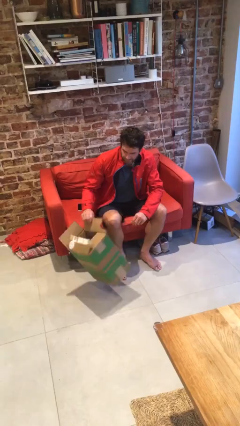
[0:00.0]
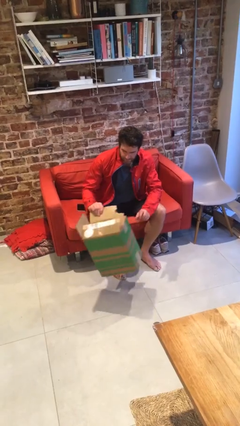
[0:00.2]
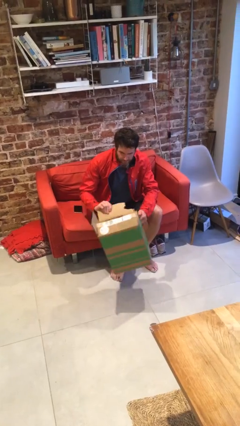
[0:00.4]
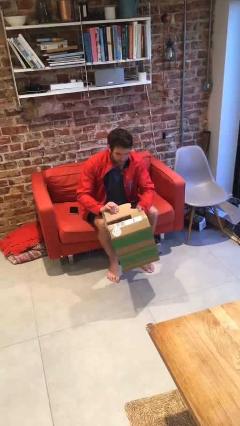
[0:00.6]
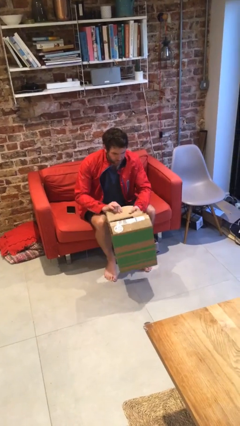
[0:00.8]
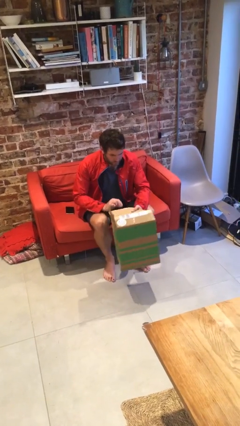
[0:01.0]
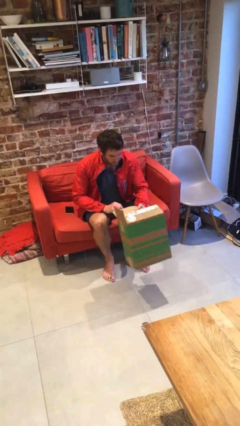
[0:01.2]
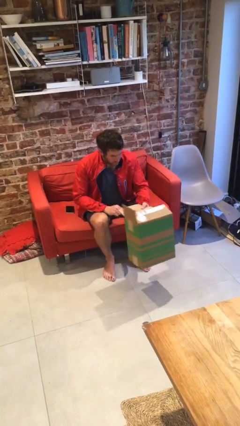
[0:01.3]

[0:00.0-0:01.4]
person picks up object from floor

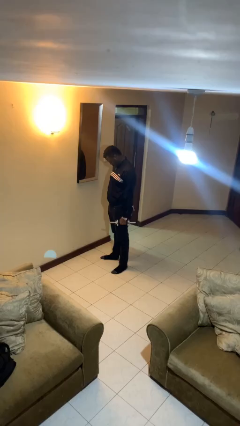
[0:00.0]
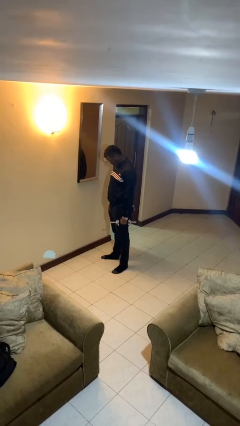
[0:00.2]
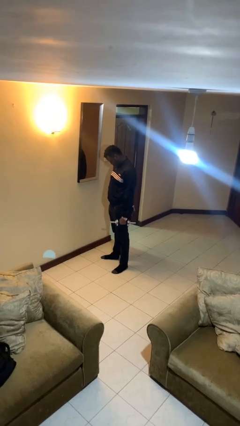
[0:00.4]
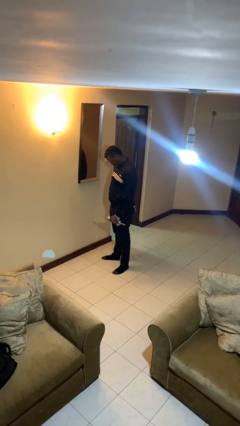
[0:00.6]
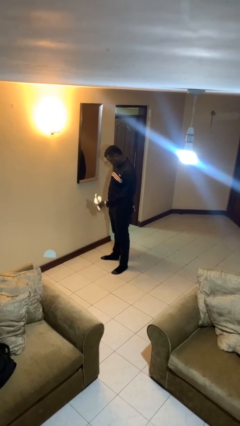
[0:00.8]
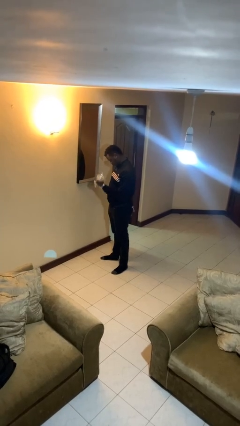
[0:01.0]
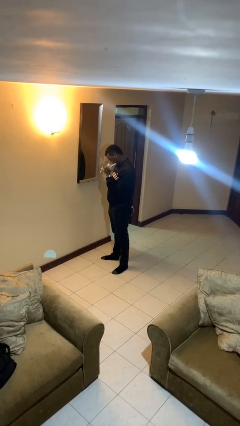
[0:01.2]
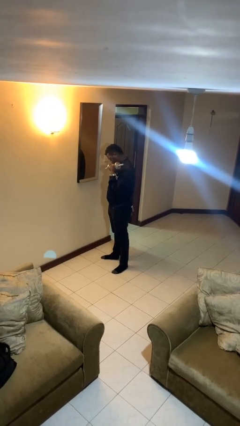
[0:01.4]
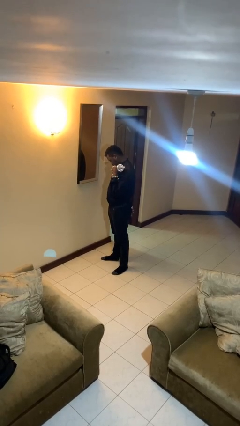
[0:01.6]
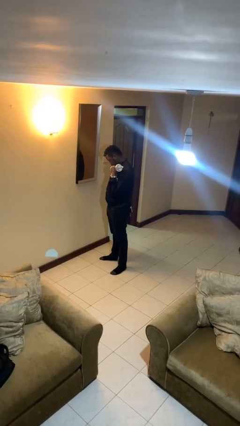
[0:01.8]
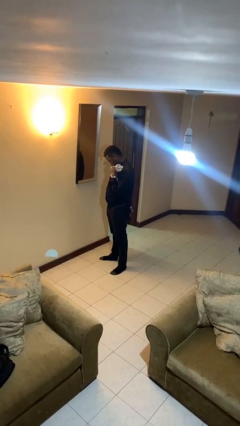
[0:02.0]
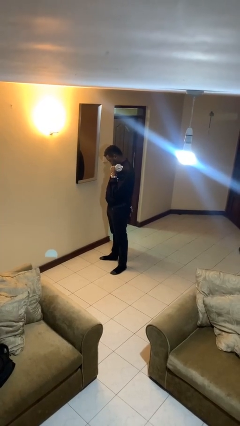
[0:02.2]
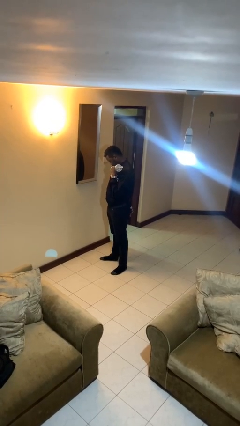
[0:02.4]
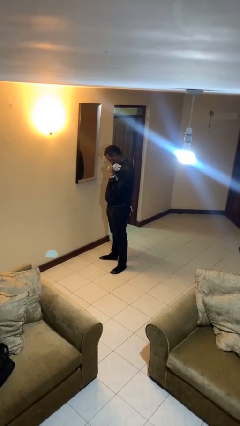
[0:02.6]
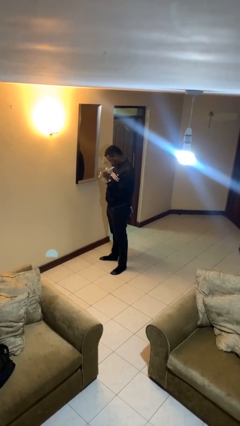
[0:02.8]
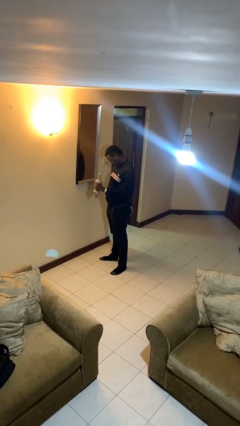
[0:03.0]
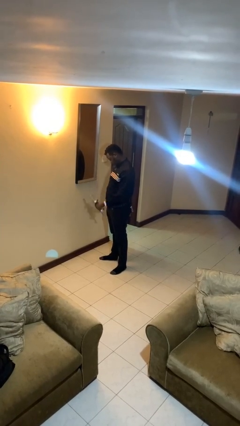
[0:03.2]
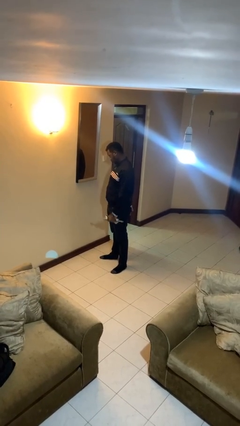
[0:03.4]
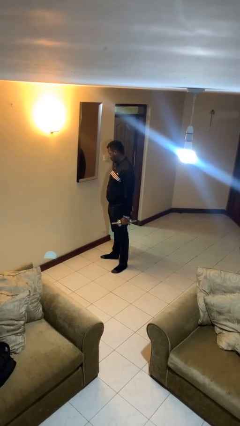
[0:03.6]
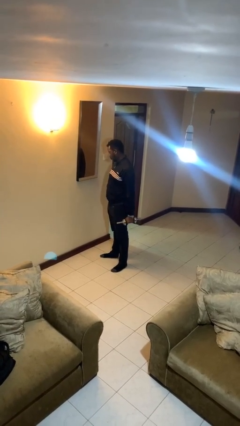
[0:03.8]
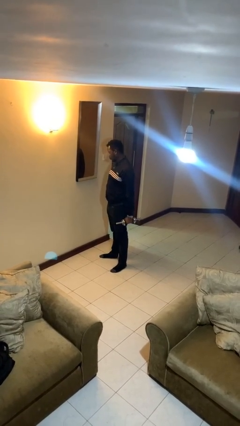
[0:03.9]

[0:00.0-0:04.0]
person lifts dumbbells

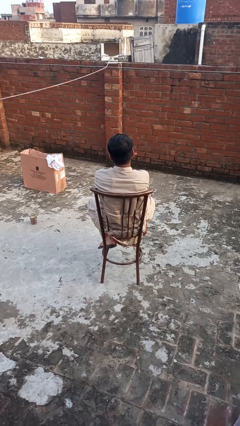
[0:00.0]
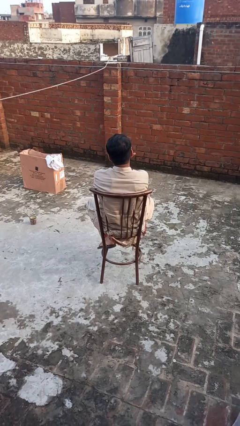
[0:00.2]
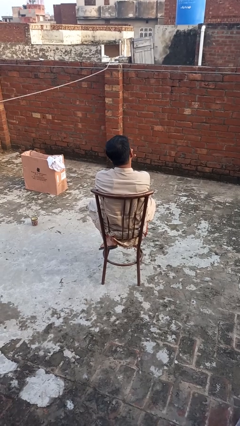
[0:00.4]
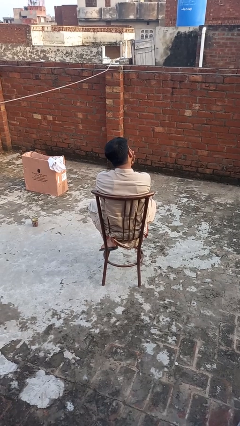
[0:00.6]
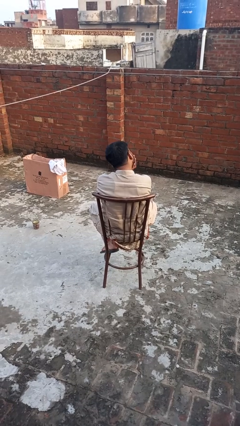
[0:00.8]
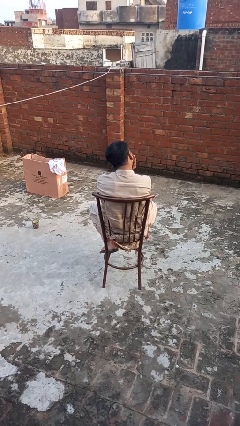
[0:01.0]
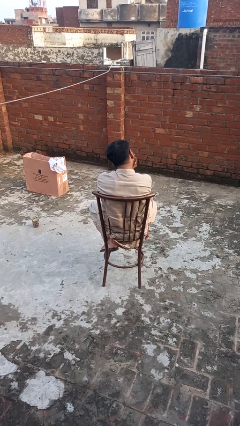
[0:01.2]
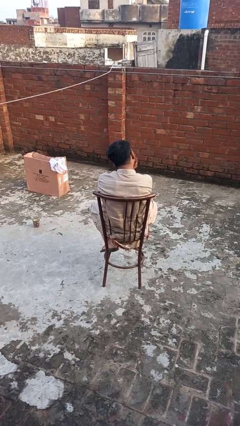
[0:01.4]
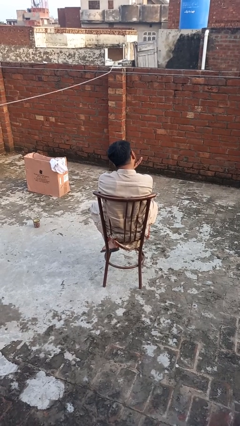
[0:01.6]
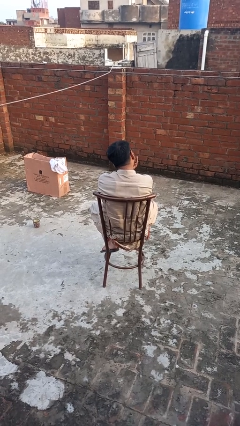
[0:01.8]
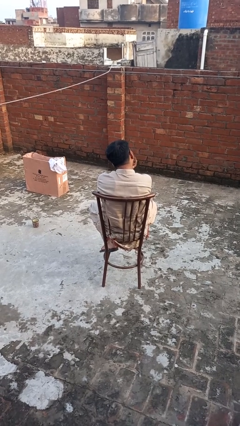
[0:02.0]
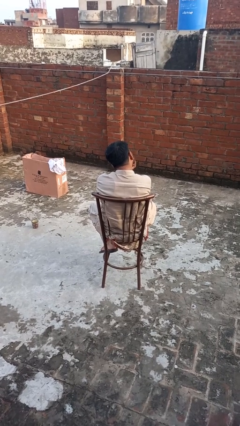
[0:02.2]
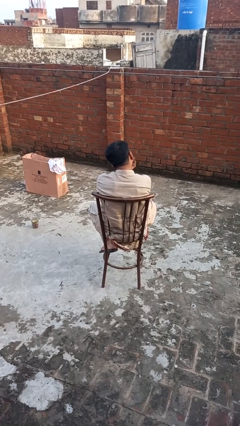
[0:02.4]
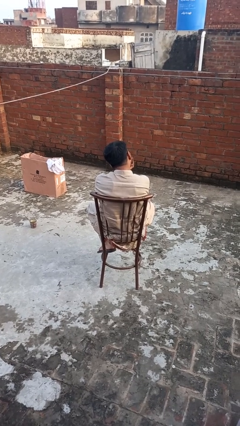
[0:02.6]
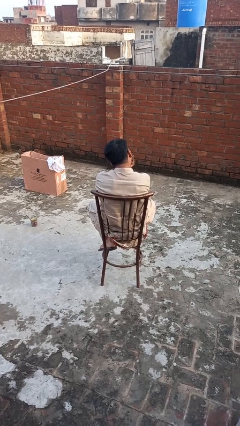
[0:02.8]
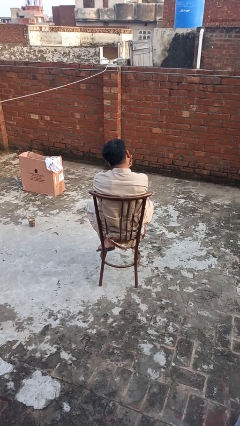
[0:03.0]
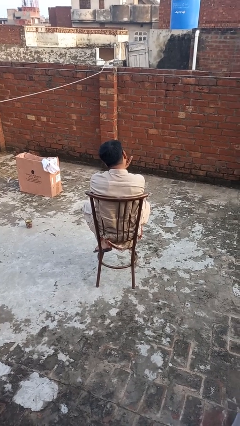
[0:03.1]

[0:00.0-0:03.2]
person strokes chin

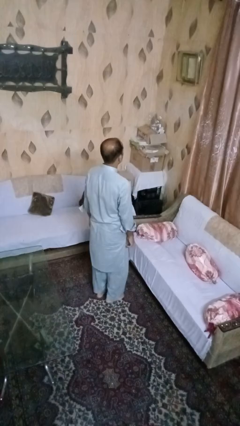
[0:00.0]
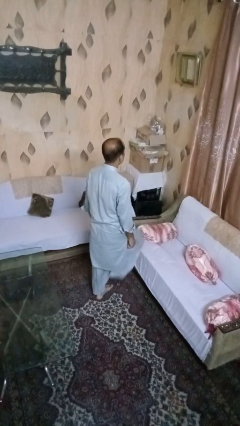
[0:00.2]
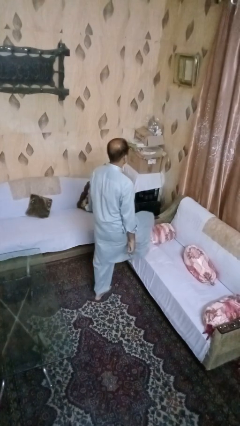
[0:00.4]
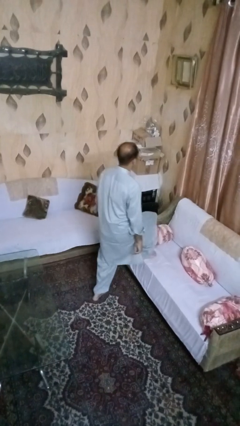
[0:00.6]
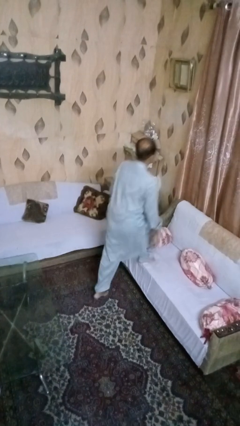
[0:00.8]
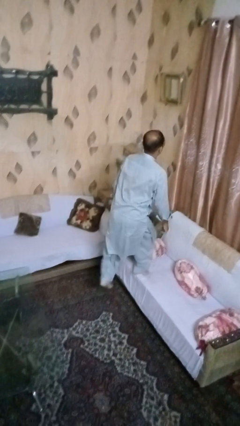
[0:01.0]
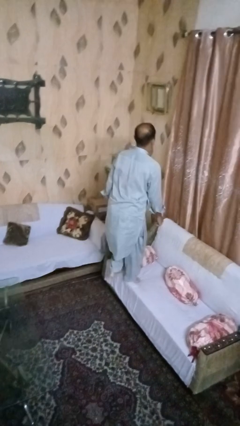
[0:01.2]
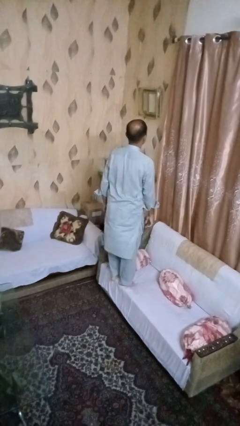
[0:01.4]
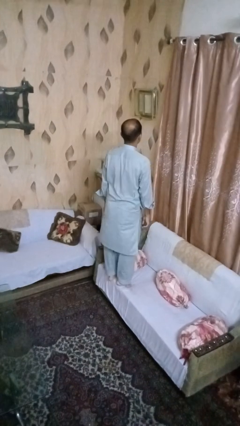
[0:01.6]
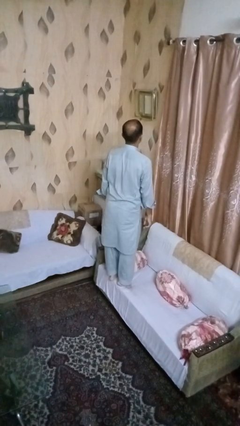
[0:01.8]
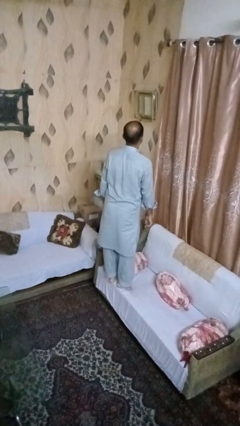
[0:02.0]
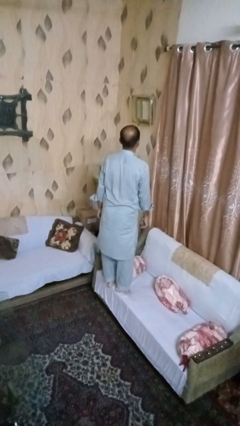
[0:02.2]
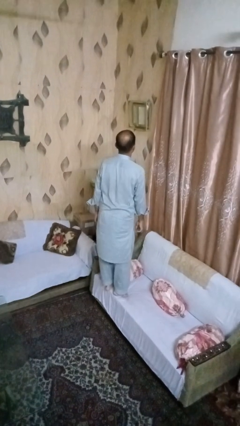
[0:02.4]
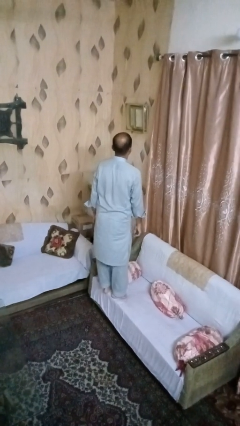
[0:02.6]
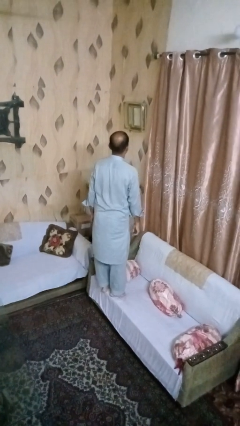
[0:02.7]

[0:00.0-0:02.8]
person climbs on couch

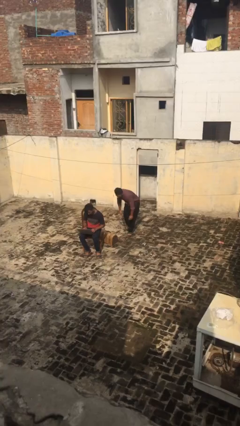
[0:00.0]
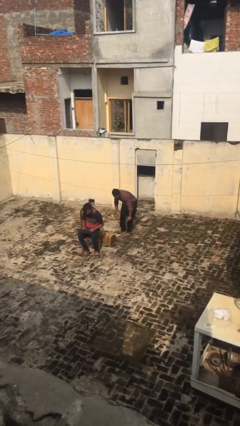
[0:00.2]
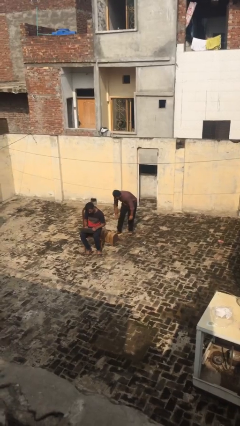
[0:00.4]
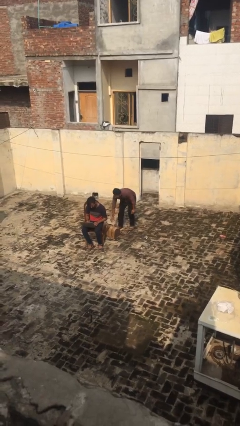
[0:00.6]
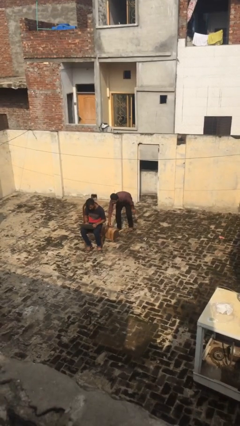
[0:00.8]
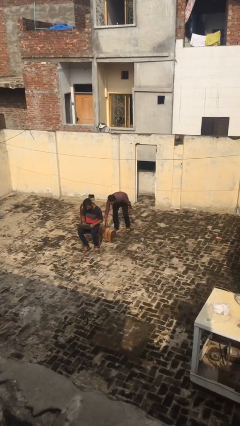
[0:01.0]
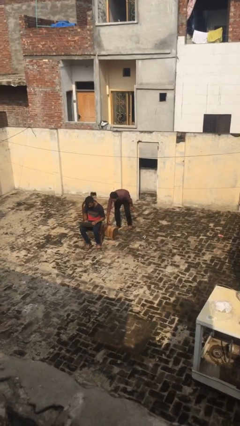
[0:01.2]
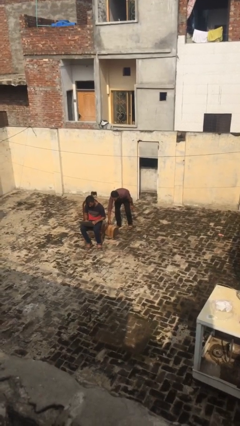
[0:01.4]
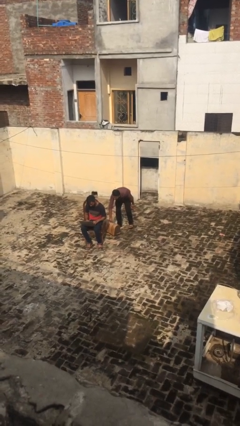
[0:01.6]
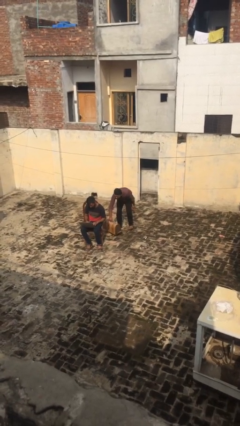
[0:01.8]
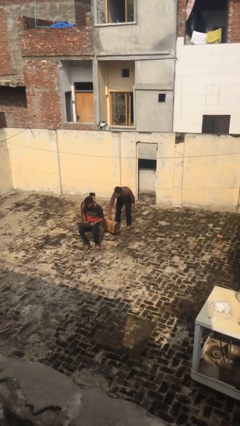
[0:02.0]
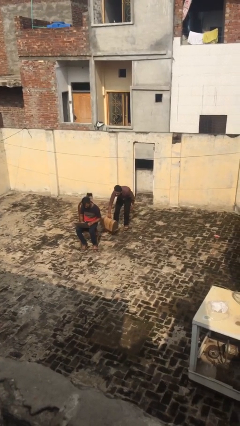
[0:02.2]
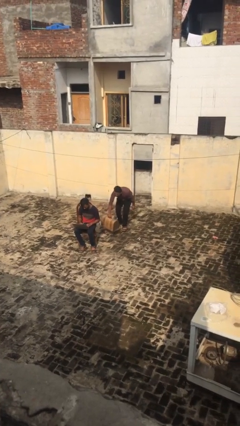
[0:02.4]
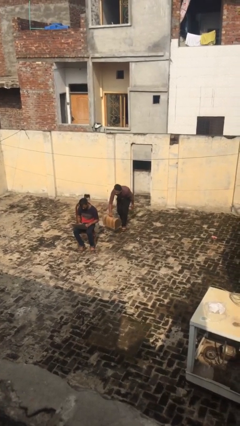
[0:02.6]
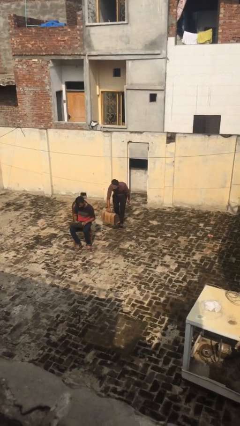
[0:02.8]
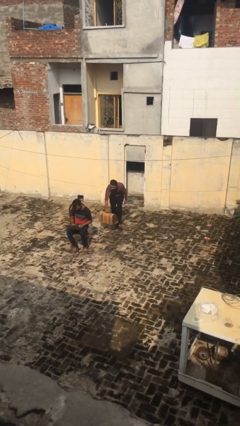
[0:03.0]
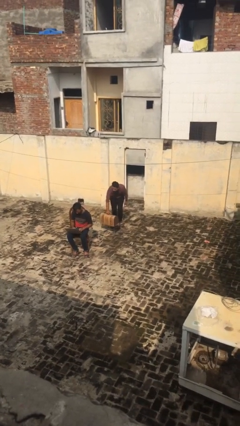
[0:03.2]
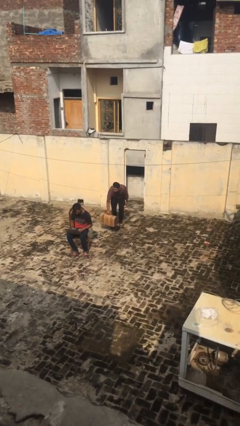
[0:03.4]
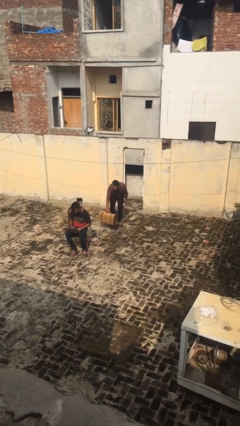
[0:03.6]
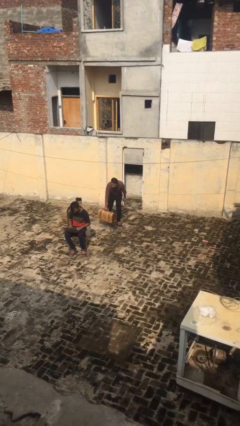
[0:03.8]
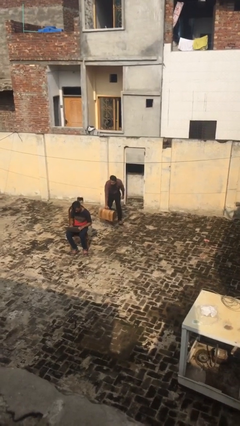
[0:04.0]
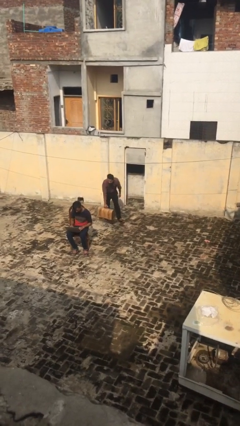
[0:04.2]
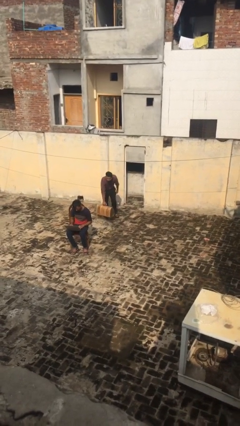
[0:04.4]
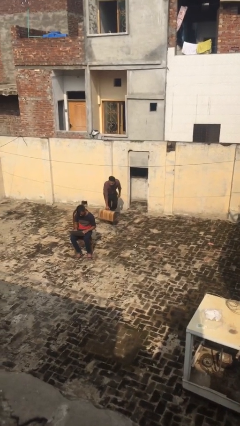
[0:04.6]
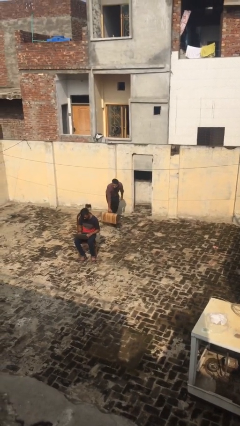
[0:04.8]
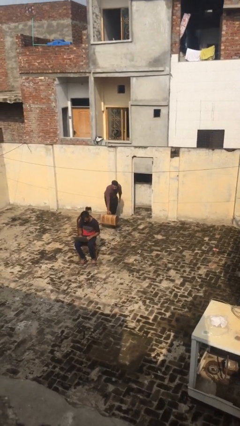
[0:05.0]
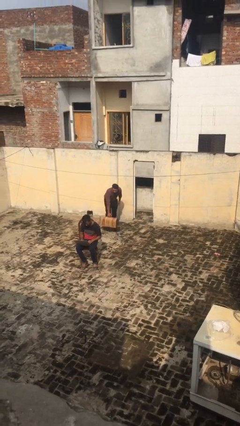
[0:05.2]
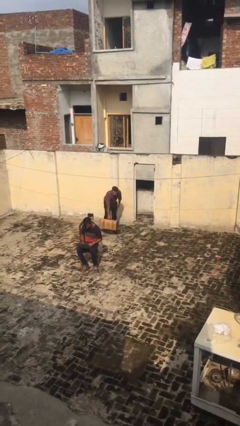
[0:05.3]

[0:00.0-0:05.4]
person steals object from person

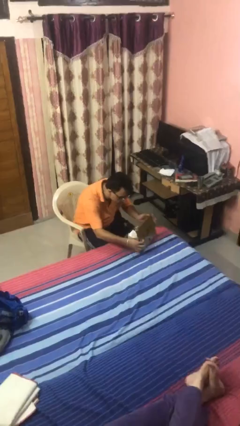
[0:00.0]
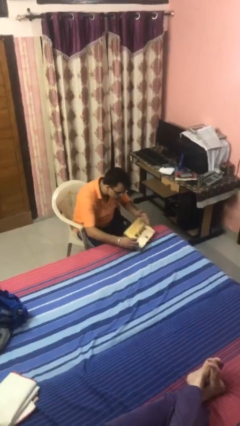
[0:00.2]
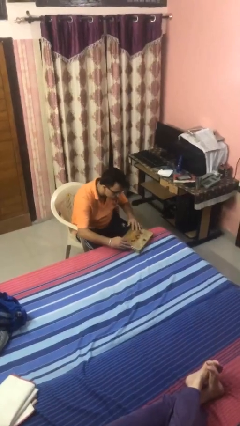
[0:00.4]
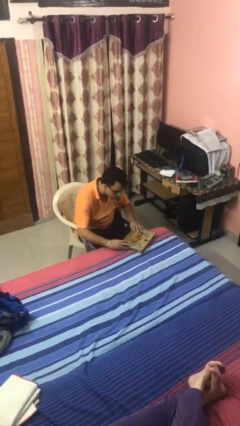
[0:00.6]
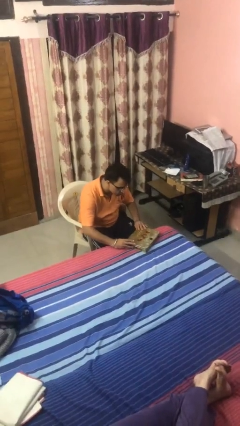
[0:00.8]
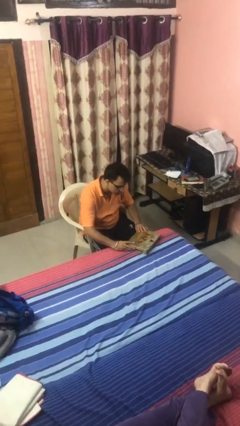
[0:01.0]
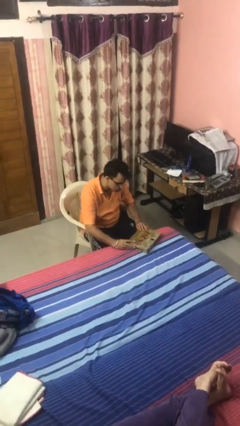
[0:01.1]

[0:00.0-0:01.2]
person closes jewelry box
